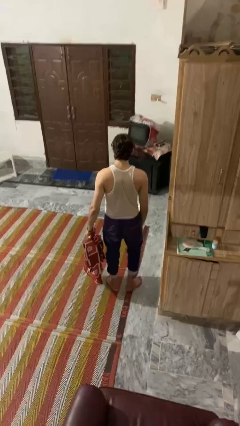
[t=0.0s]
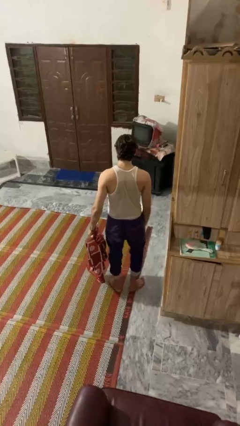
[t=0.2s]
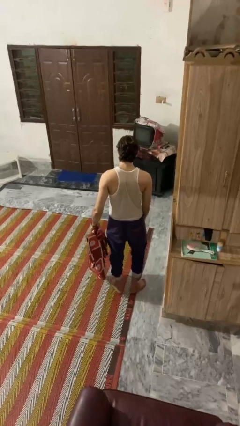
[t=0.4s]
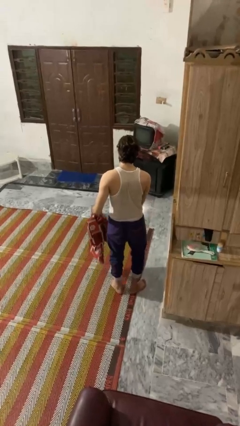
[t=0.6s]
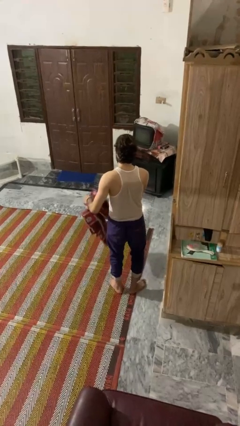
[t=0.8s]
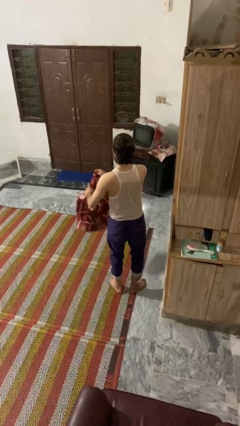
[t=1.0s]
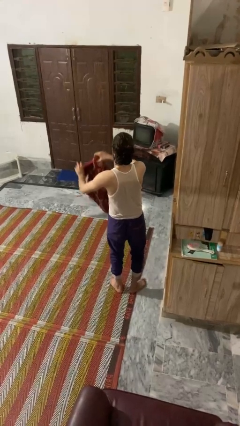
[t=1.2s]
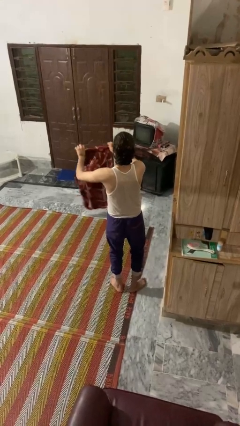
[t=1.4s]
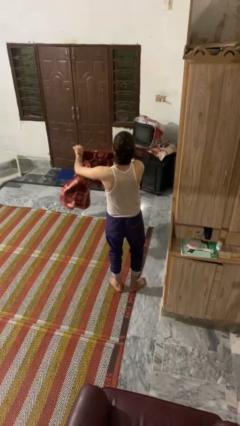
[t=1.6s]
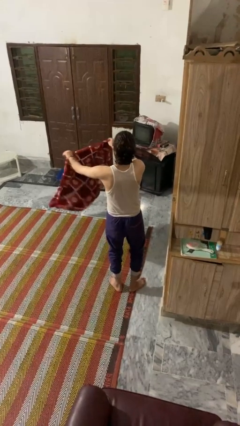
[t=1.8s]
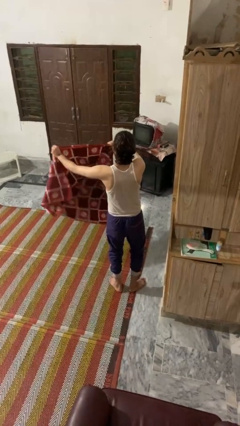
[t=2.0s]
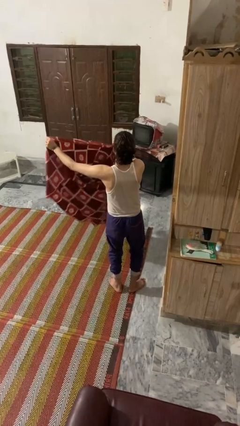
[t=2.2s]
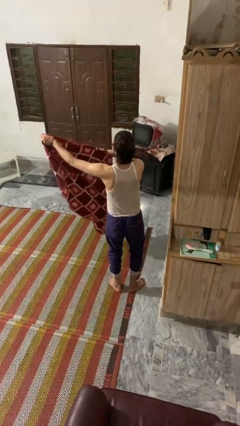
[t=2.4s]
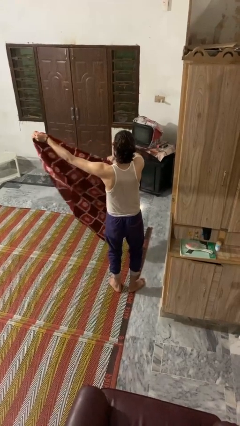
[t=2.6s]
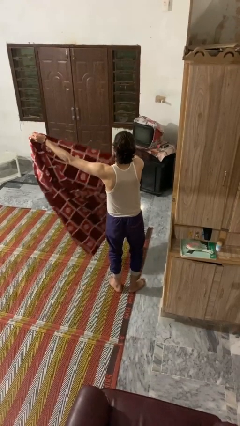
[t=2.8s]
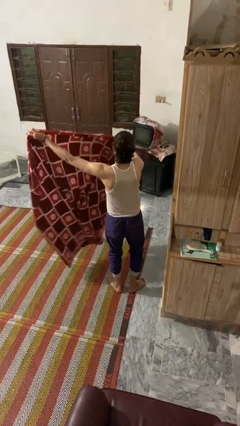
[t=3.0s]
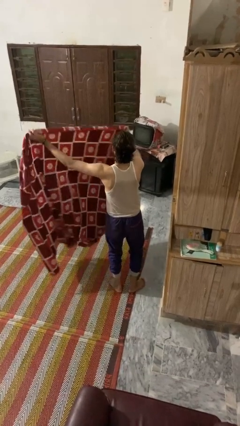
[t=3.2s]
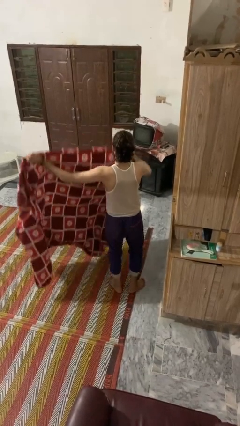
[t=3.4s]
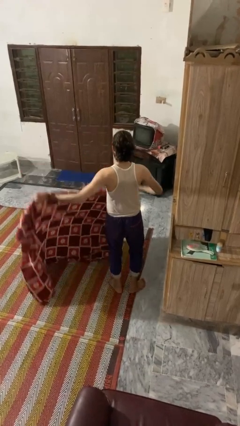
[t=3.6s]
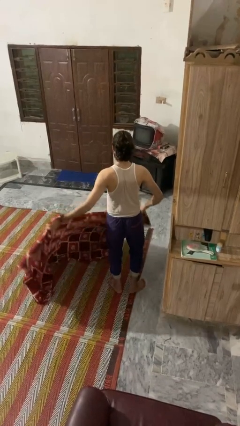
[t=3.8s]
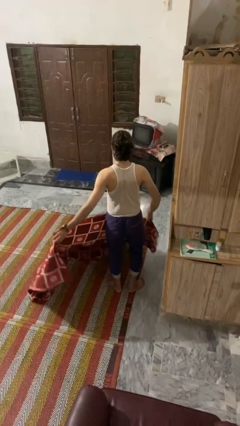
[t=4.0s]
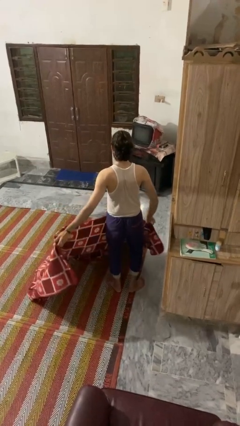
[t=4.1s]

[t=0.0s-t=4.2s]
person unfolds blanket

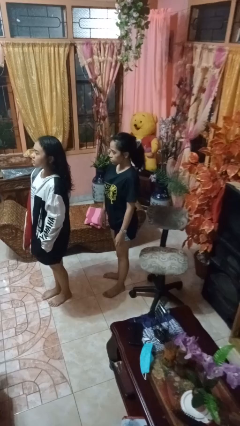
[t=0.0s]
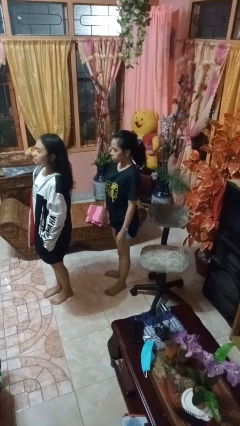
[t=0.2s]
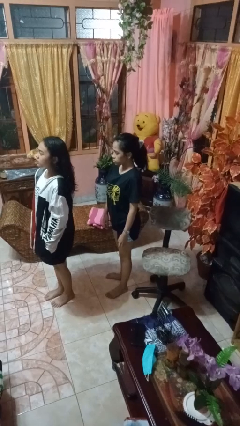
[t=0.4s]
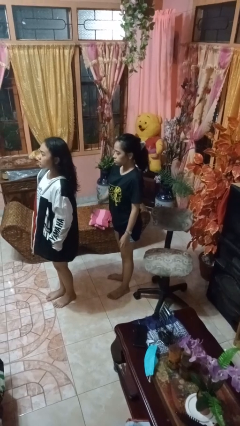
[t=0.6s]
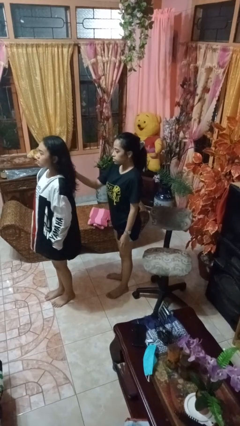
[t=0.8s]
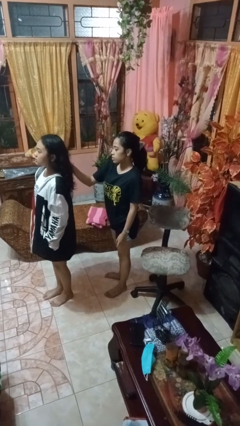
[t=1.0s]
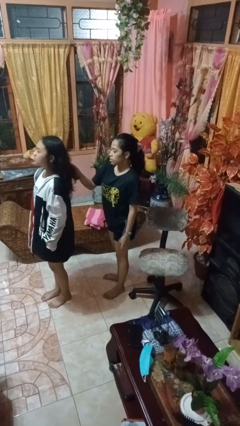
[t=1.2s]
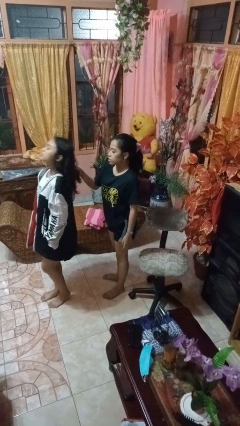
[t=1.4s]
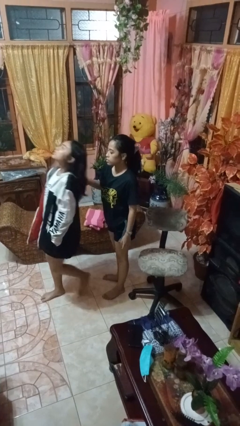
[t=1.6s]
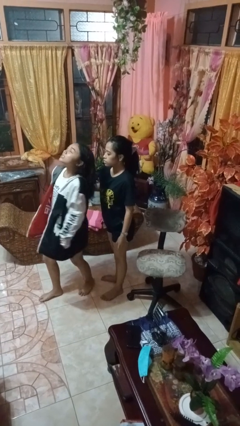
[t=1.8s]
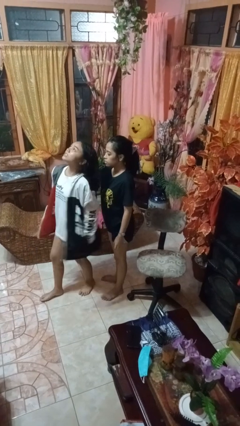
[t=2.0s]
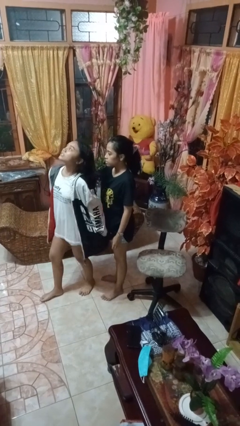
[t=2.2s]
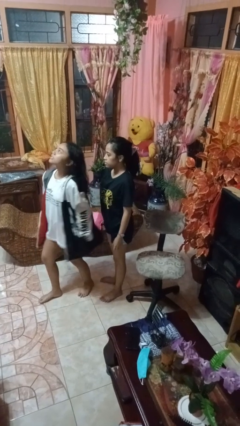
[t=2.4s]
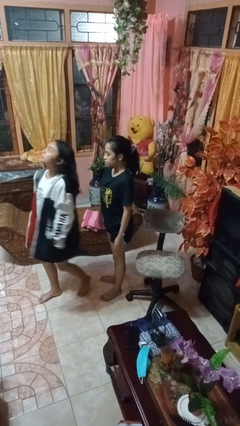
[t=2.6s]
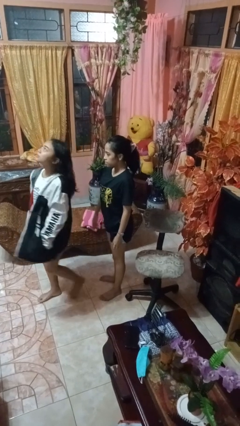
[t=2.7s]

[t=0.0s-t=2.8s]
person grabs person by hair

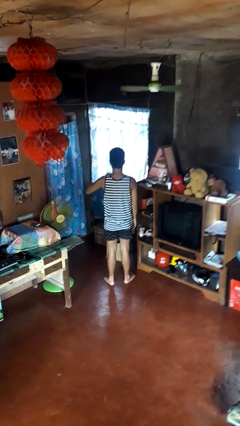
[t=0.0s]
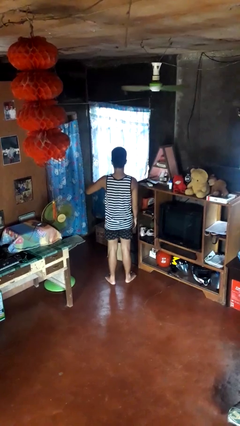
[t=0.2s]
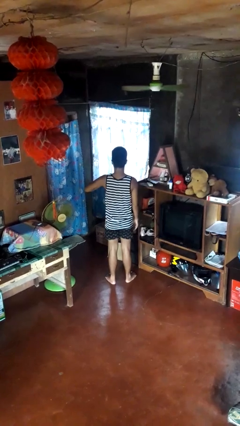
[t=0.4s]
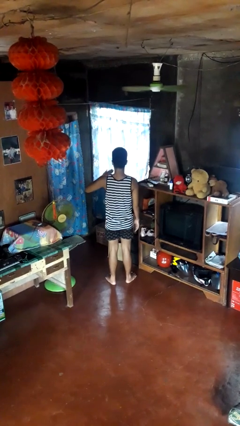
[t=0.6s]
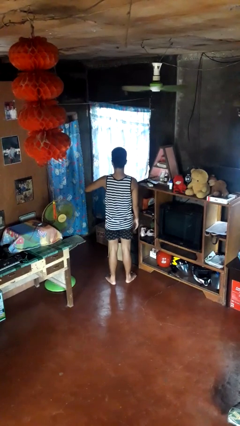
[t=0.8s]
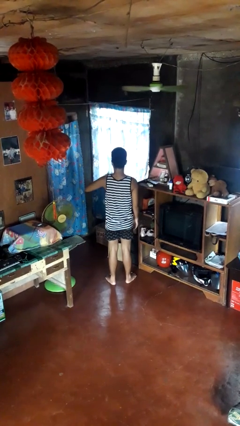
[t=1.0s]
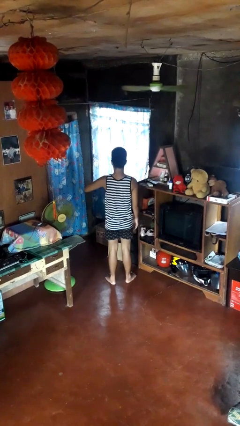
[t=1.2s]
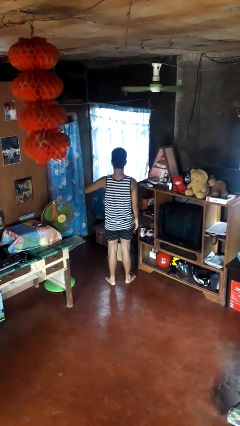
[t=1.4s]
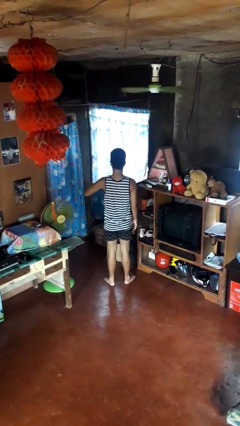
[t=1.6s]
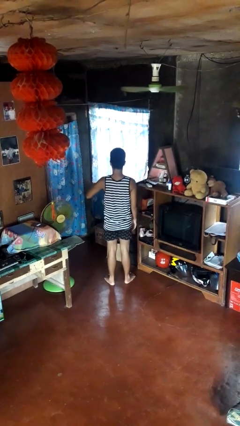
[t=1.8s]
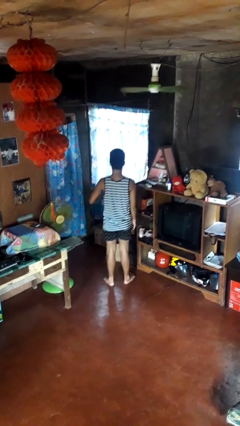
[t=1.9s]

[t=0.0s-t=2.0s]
person drums on chest

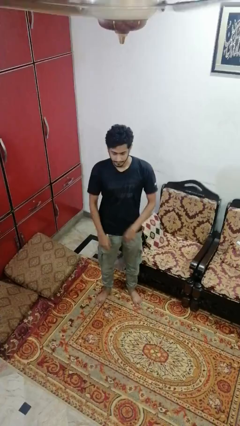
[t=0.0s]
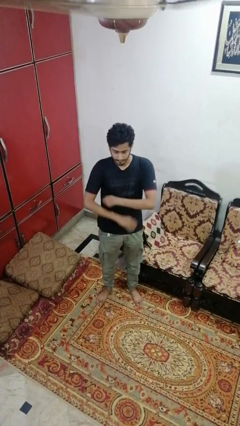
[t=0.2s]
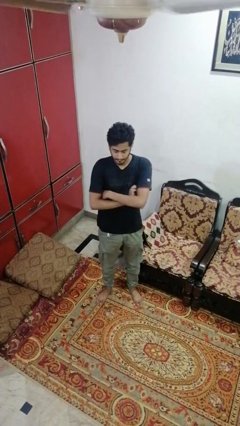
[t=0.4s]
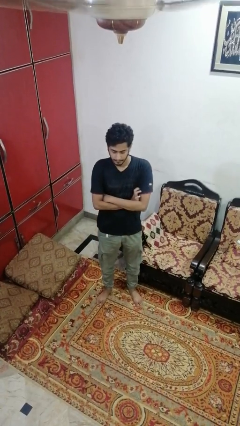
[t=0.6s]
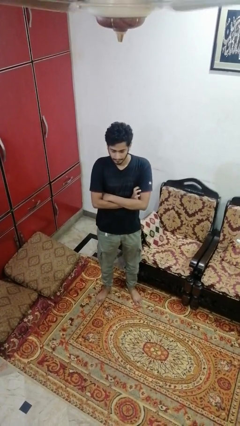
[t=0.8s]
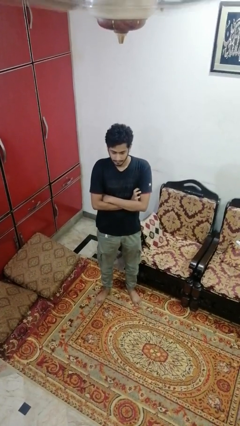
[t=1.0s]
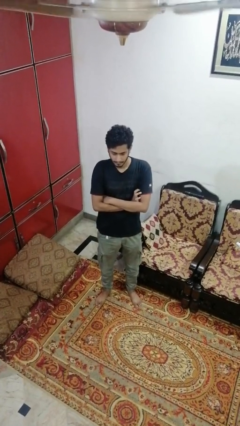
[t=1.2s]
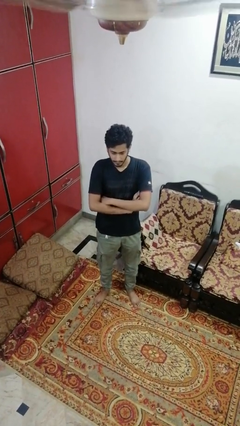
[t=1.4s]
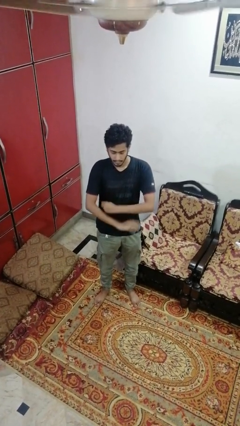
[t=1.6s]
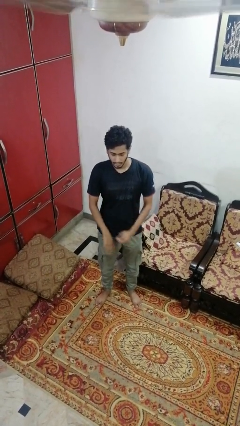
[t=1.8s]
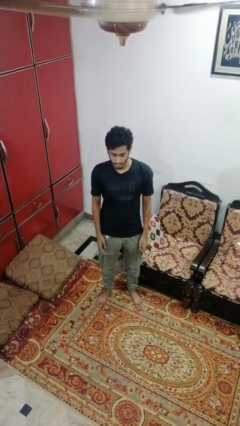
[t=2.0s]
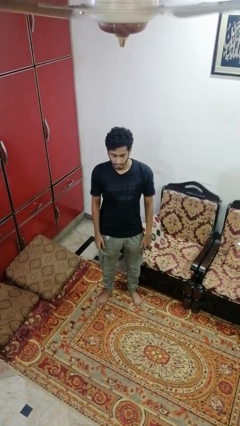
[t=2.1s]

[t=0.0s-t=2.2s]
person crosses arms

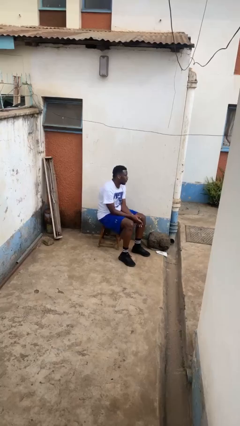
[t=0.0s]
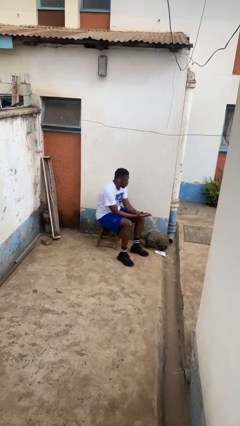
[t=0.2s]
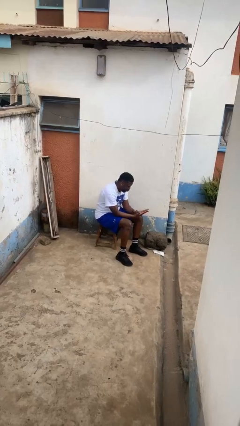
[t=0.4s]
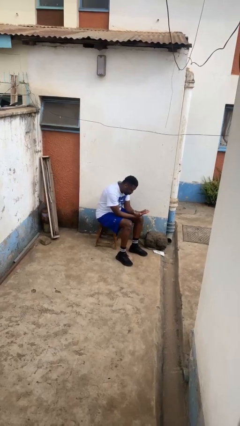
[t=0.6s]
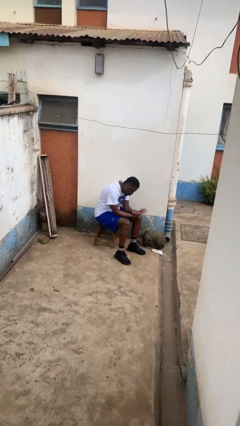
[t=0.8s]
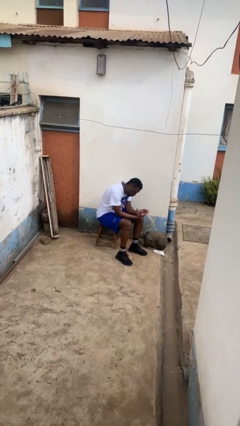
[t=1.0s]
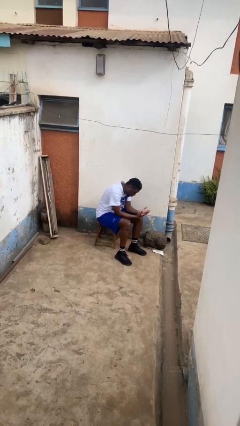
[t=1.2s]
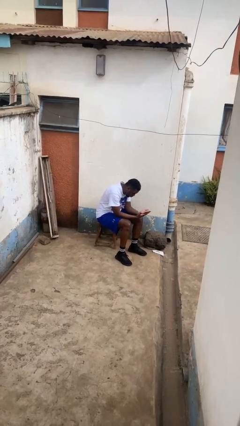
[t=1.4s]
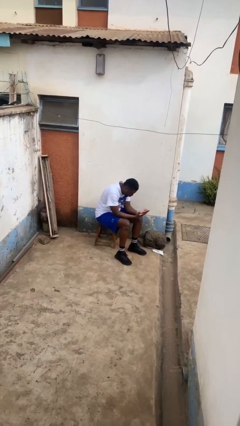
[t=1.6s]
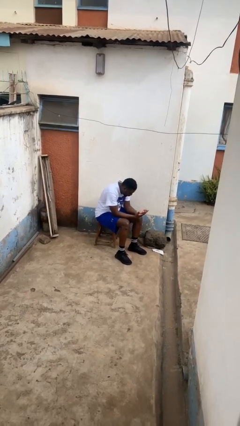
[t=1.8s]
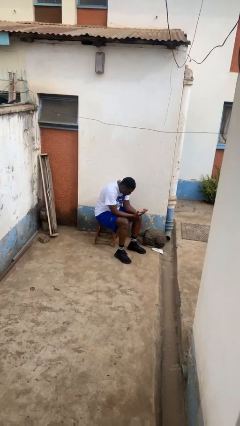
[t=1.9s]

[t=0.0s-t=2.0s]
person looks at hands in lap

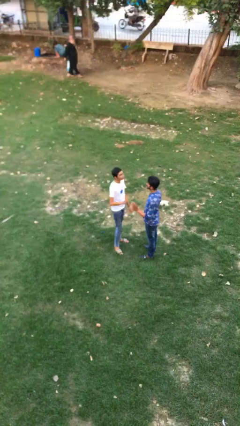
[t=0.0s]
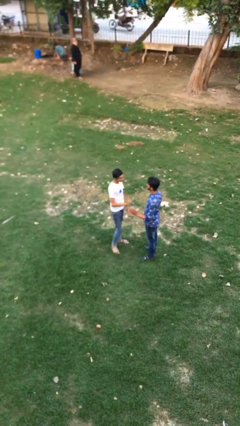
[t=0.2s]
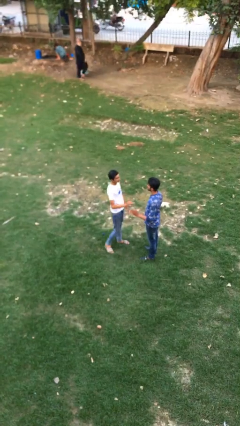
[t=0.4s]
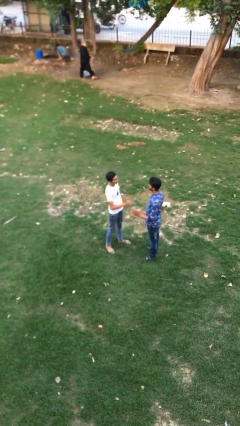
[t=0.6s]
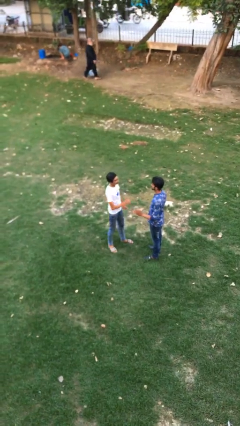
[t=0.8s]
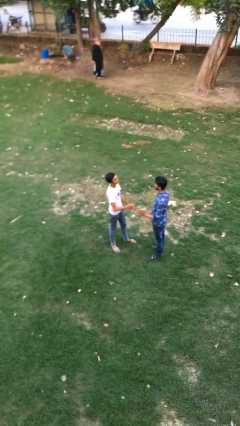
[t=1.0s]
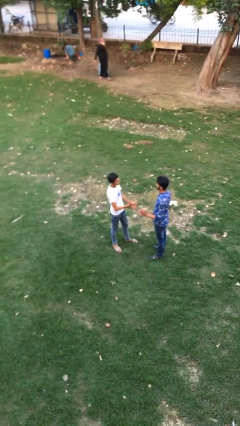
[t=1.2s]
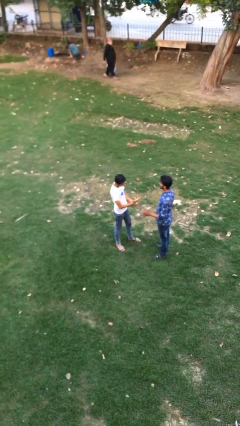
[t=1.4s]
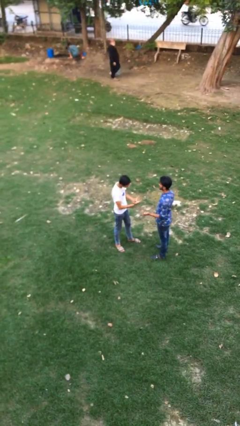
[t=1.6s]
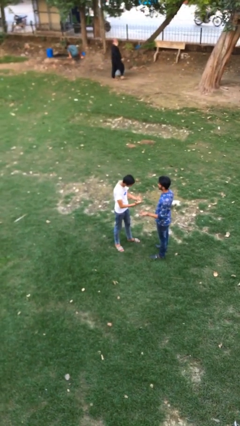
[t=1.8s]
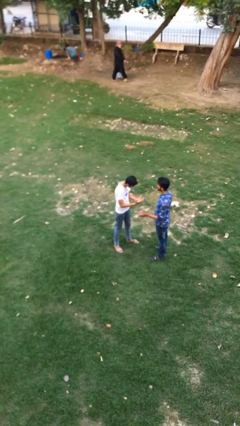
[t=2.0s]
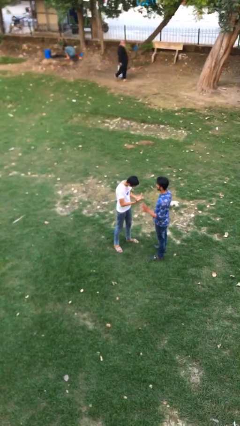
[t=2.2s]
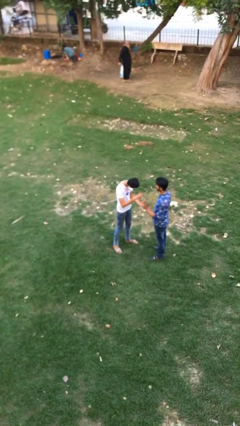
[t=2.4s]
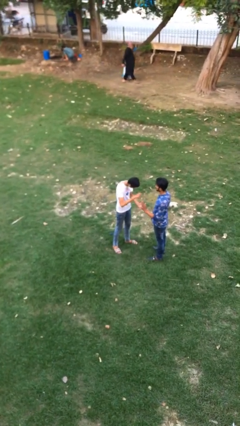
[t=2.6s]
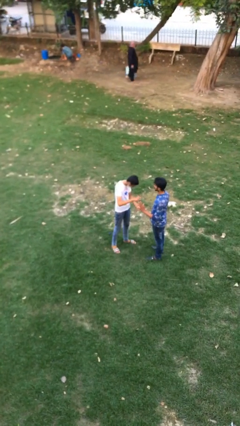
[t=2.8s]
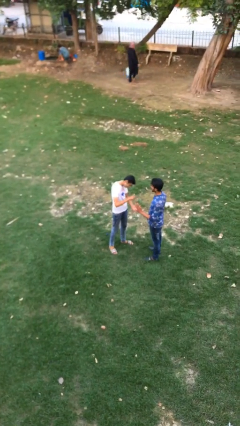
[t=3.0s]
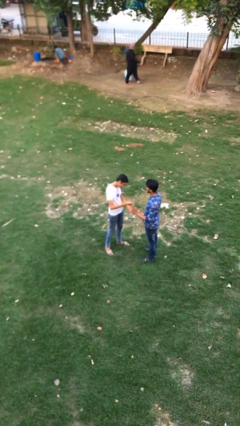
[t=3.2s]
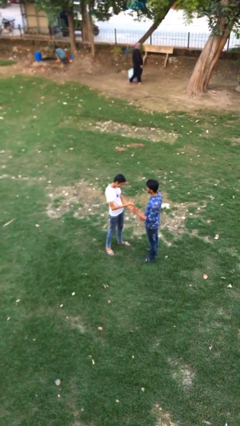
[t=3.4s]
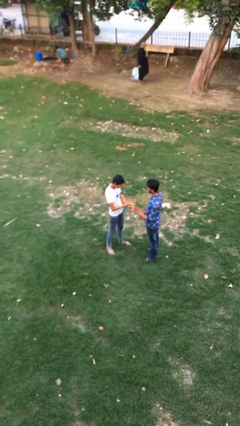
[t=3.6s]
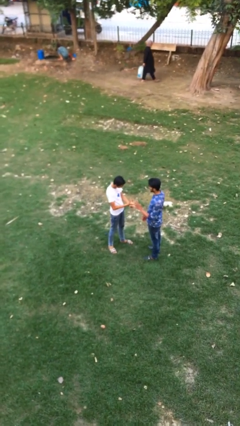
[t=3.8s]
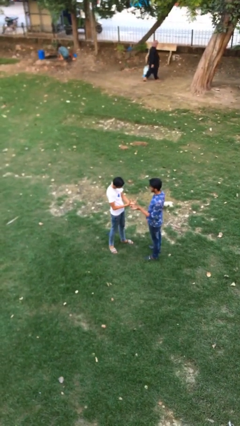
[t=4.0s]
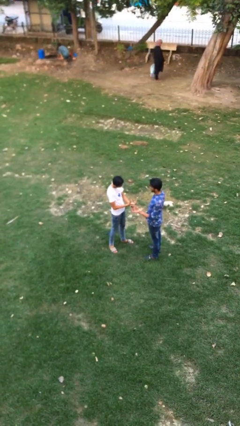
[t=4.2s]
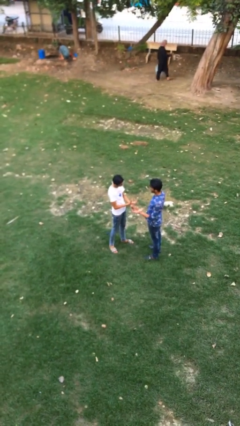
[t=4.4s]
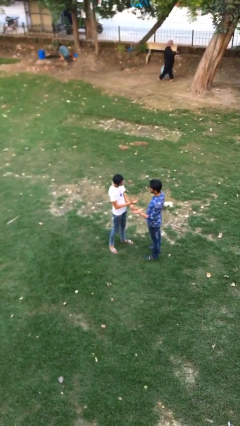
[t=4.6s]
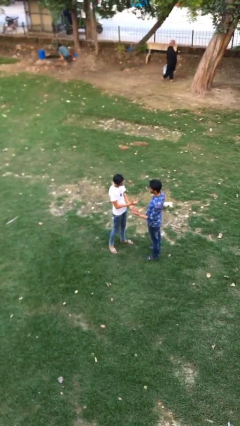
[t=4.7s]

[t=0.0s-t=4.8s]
person talks to person
